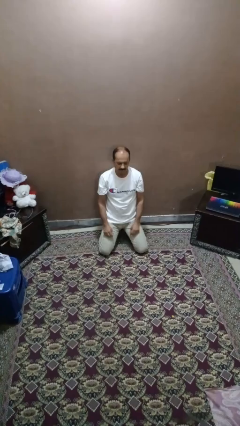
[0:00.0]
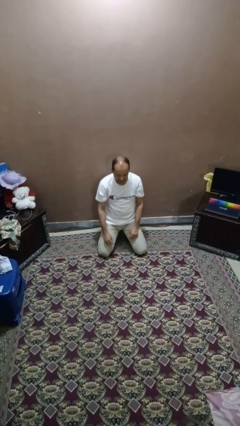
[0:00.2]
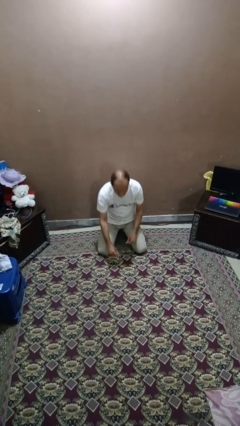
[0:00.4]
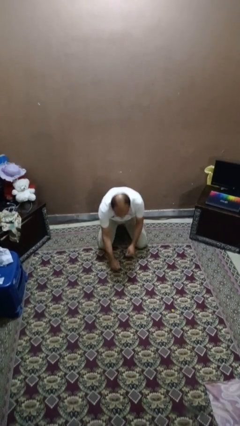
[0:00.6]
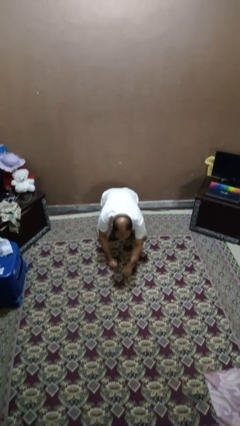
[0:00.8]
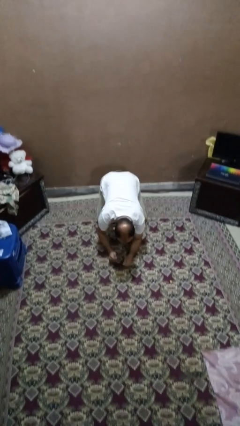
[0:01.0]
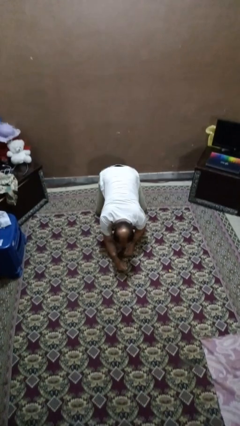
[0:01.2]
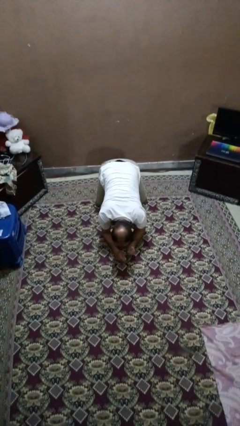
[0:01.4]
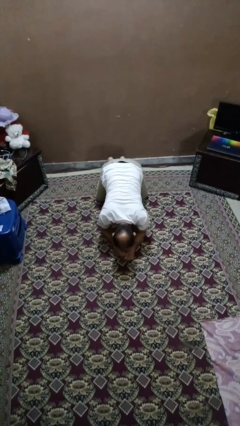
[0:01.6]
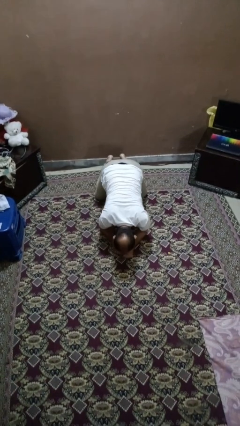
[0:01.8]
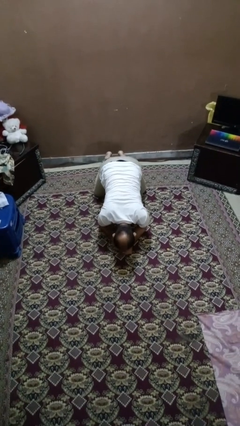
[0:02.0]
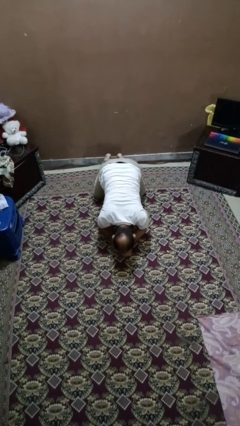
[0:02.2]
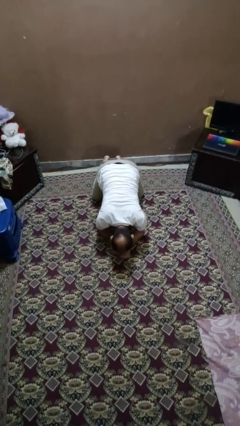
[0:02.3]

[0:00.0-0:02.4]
person crawls

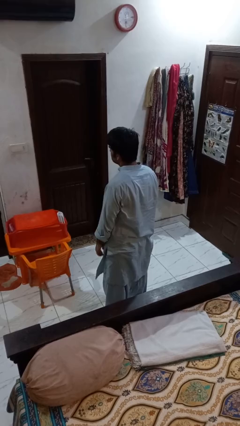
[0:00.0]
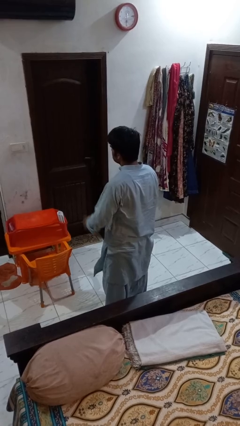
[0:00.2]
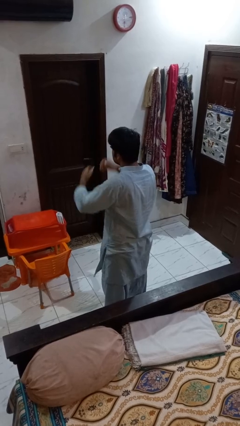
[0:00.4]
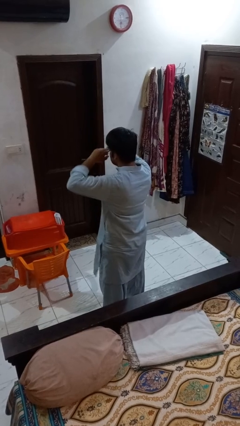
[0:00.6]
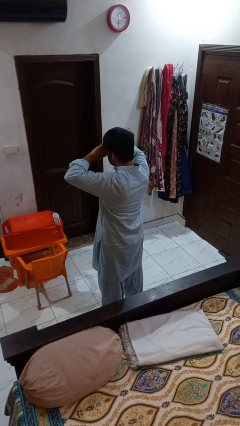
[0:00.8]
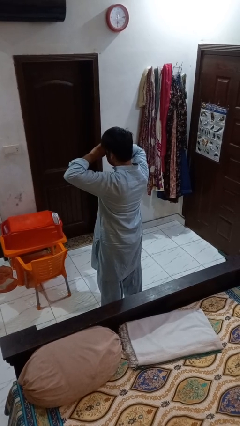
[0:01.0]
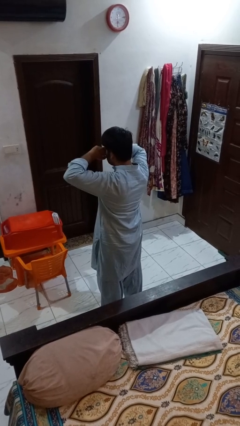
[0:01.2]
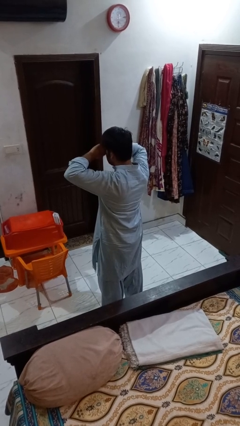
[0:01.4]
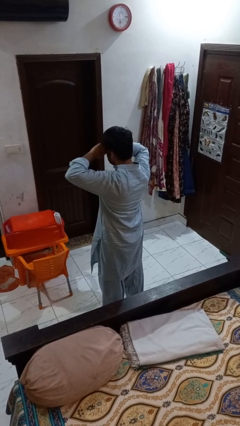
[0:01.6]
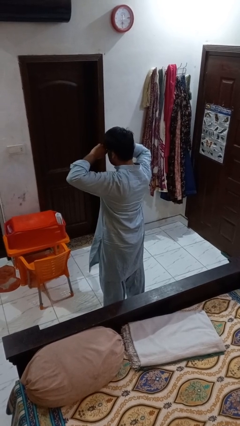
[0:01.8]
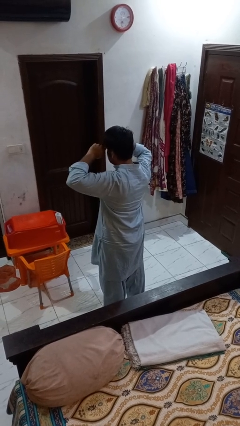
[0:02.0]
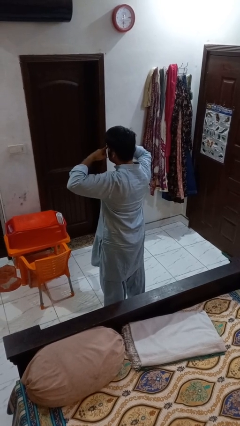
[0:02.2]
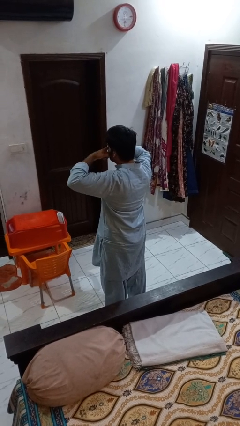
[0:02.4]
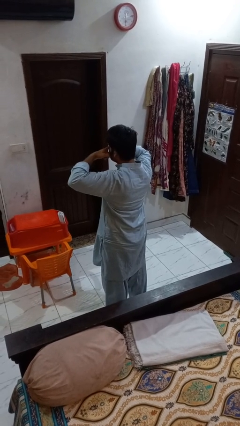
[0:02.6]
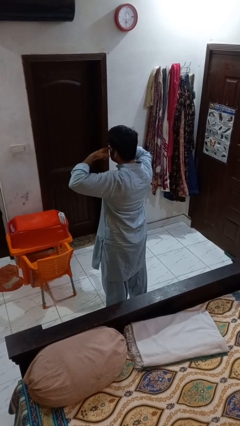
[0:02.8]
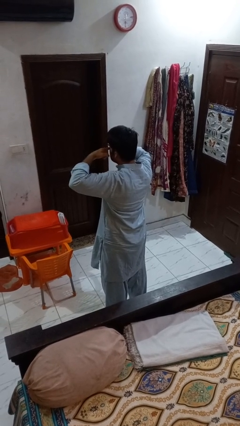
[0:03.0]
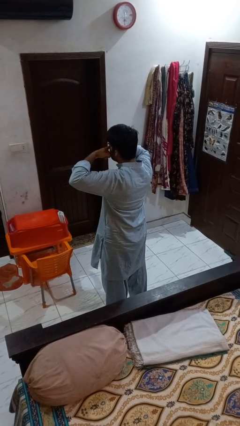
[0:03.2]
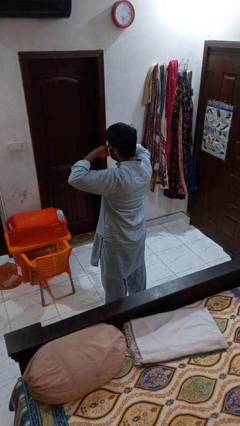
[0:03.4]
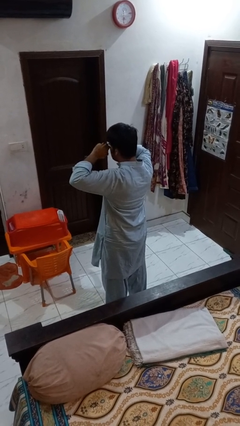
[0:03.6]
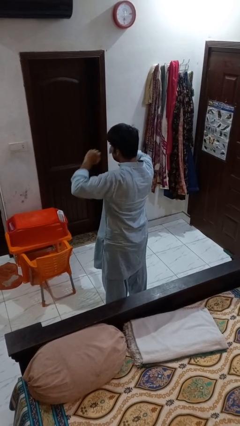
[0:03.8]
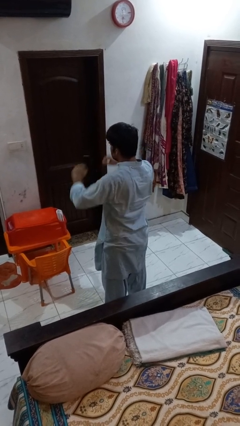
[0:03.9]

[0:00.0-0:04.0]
person rubs eyes

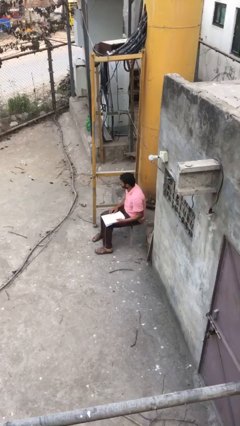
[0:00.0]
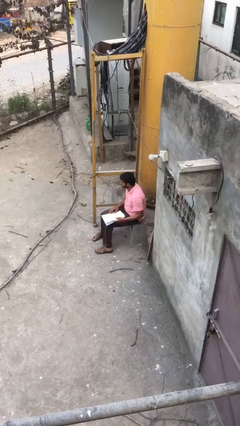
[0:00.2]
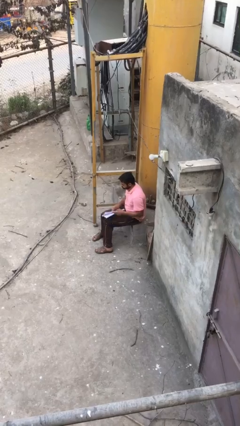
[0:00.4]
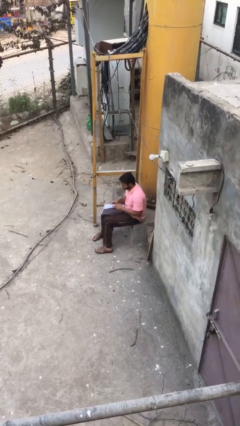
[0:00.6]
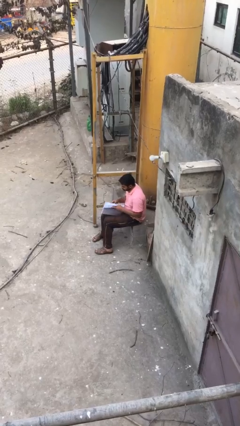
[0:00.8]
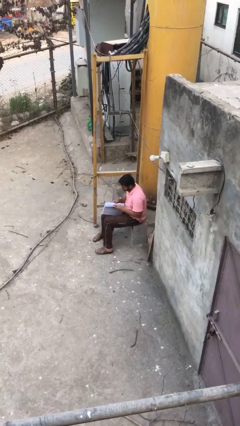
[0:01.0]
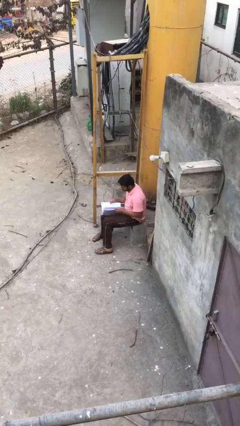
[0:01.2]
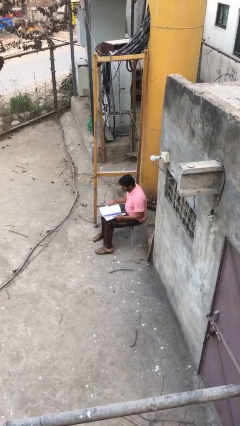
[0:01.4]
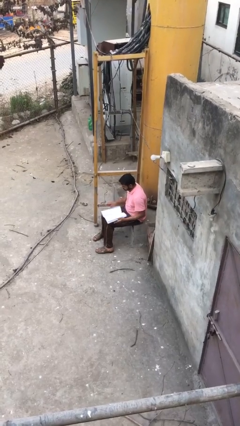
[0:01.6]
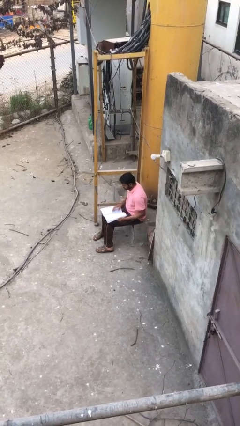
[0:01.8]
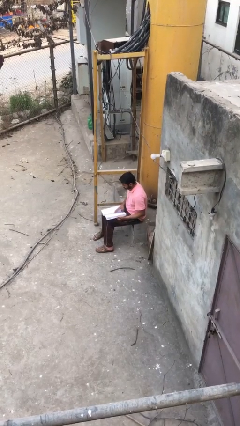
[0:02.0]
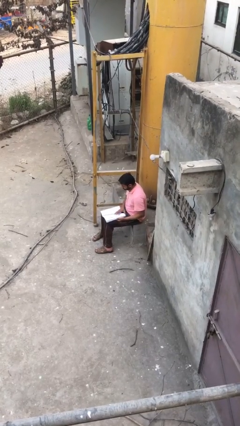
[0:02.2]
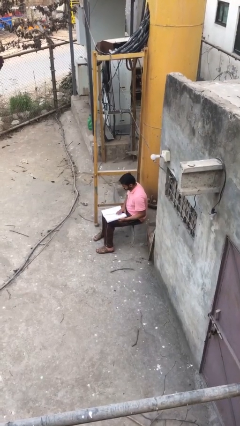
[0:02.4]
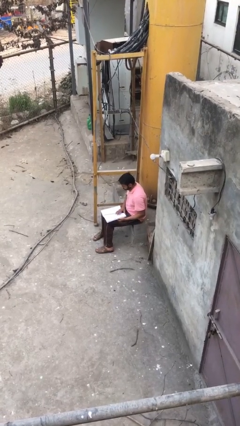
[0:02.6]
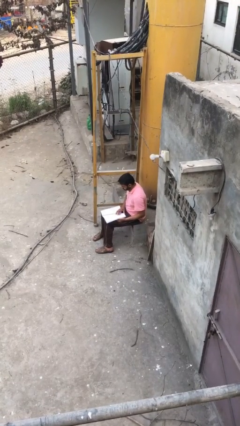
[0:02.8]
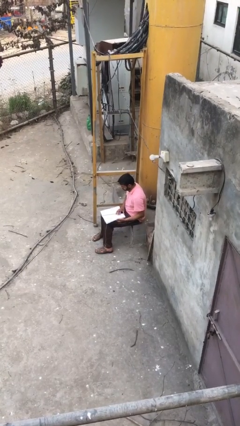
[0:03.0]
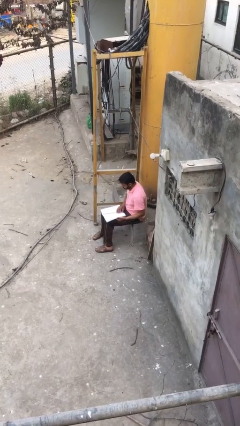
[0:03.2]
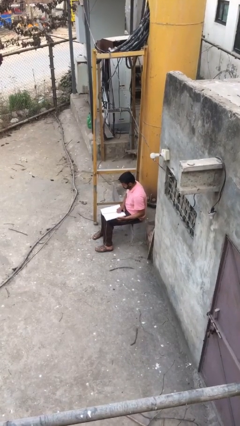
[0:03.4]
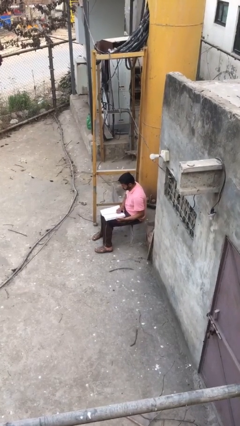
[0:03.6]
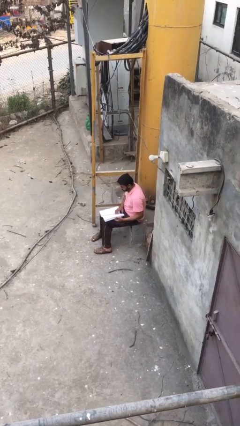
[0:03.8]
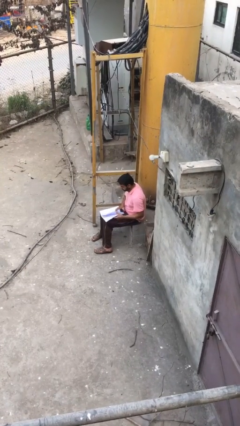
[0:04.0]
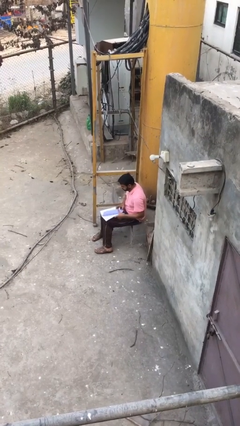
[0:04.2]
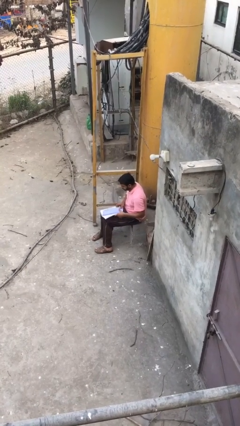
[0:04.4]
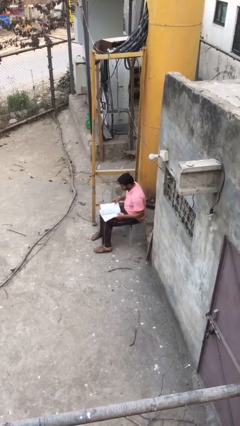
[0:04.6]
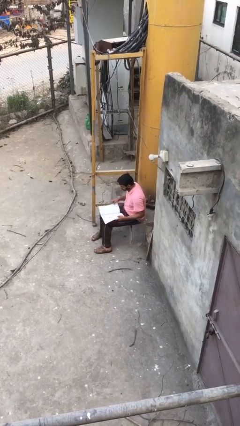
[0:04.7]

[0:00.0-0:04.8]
person reads document

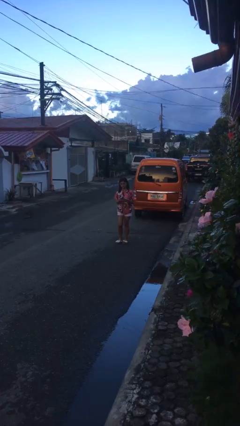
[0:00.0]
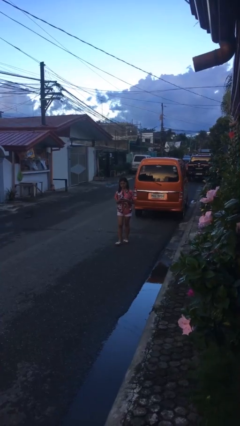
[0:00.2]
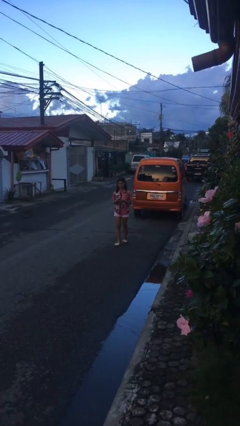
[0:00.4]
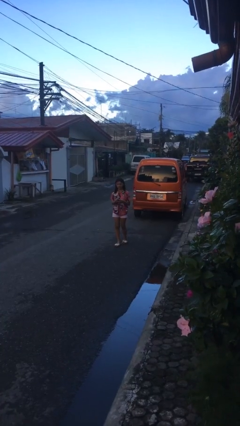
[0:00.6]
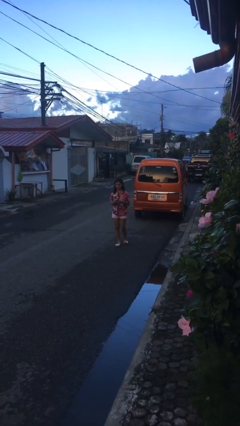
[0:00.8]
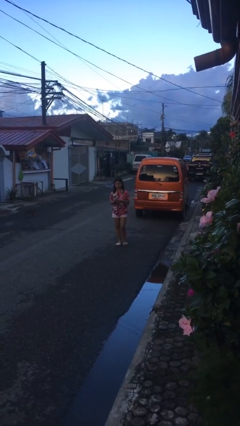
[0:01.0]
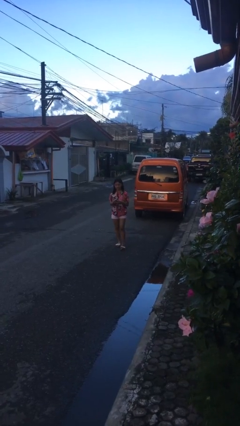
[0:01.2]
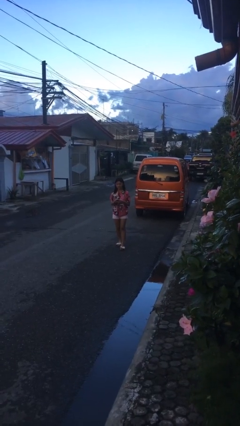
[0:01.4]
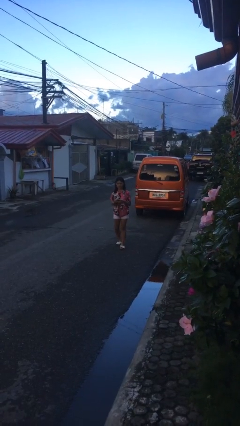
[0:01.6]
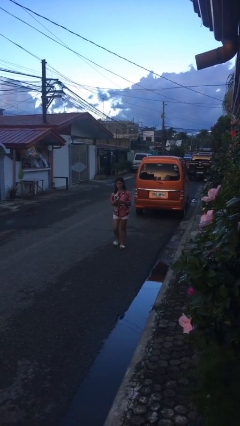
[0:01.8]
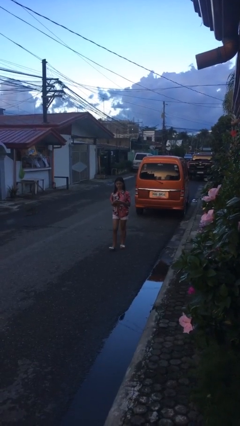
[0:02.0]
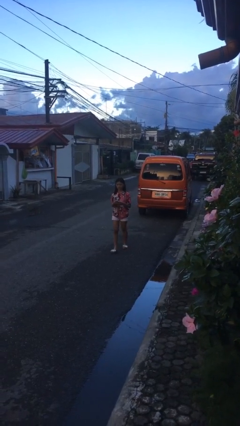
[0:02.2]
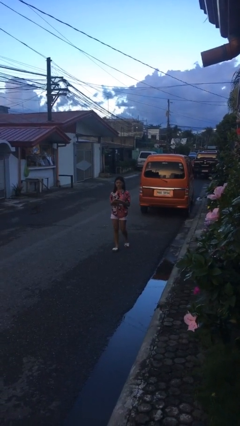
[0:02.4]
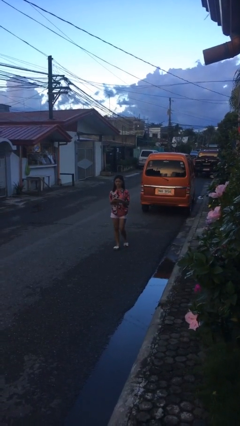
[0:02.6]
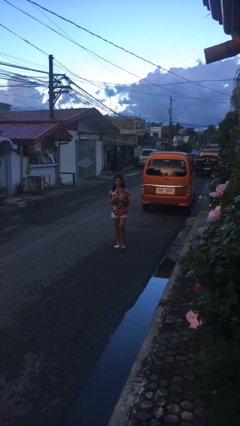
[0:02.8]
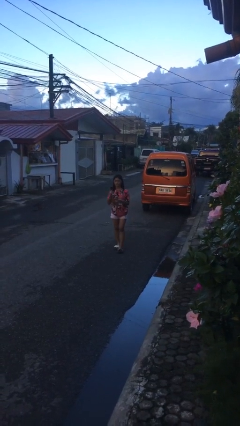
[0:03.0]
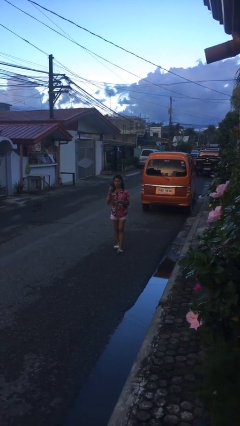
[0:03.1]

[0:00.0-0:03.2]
person texts on phone

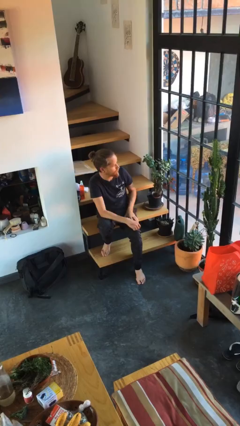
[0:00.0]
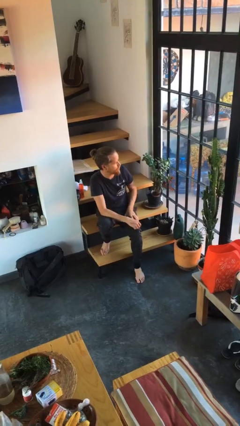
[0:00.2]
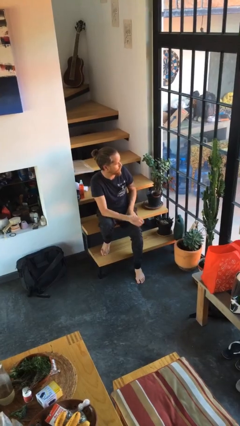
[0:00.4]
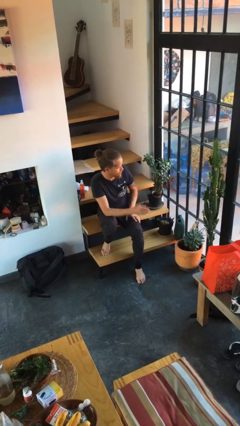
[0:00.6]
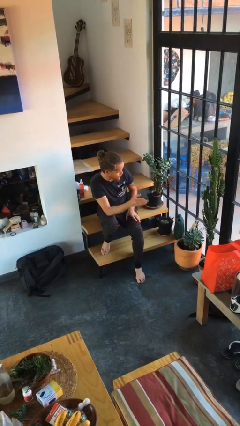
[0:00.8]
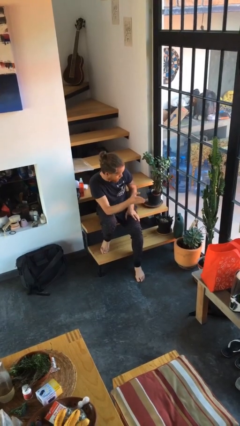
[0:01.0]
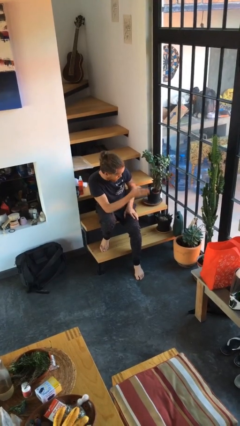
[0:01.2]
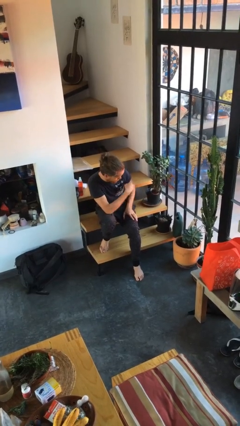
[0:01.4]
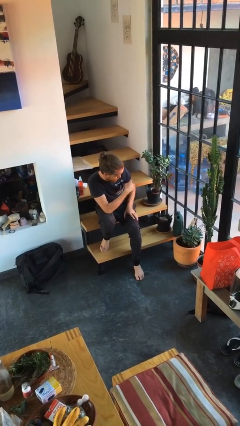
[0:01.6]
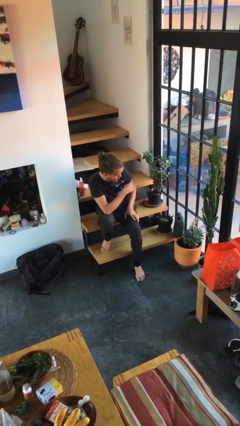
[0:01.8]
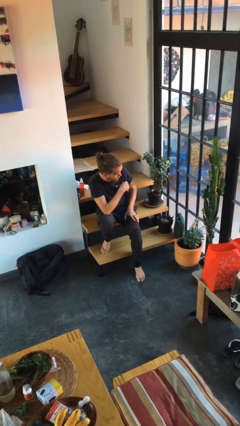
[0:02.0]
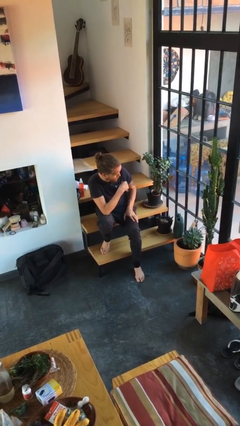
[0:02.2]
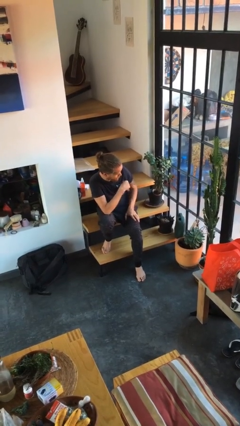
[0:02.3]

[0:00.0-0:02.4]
person gestures swipe left

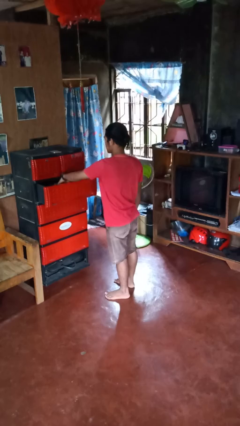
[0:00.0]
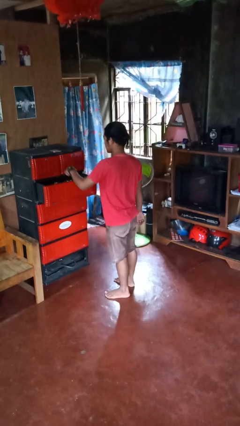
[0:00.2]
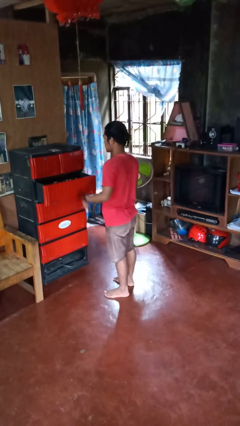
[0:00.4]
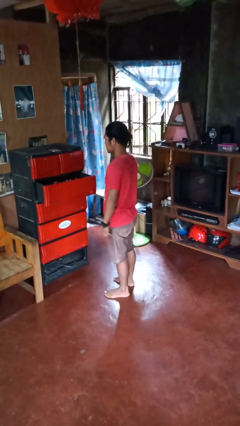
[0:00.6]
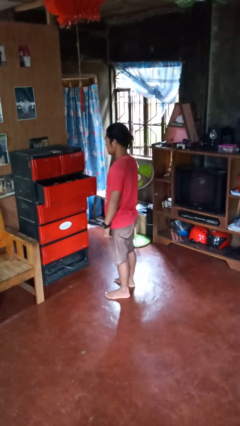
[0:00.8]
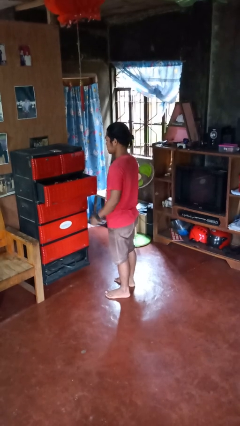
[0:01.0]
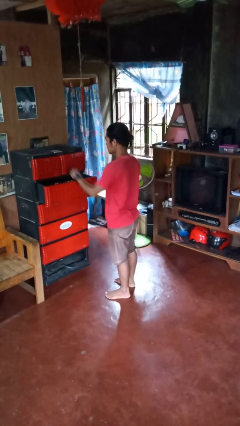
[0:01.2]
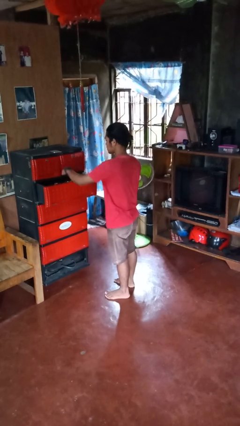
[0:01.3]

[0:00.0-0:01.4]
person puts clothes into dresser
